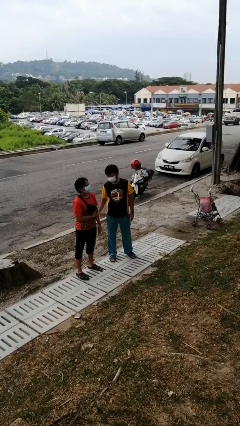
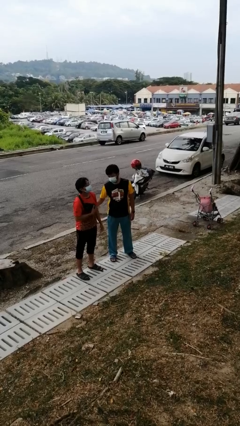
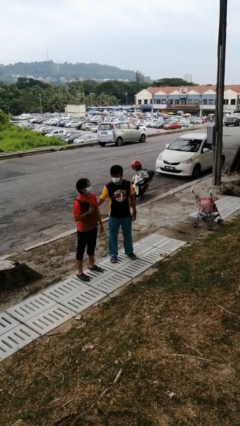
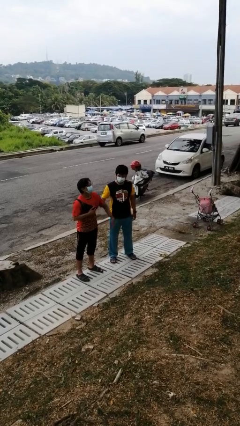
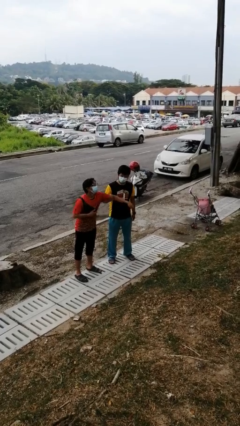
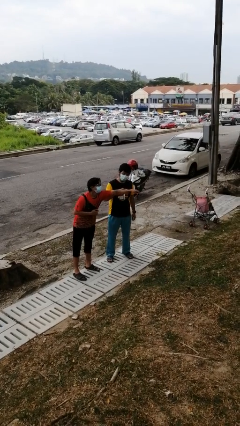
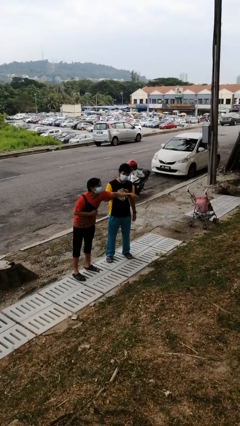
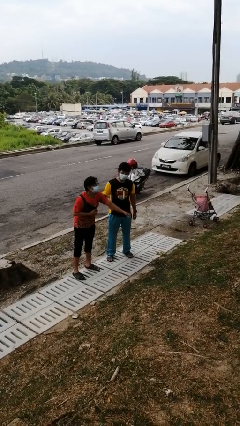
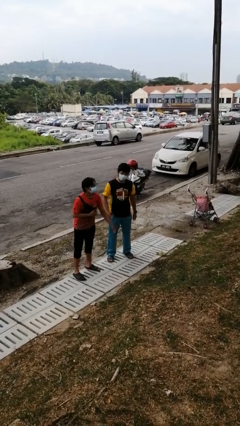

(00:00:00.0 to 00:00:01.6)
person grabs person by bicep

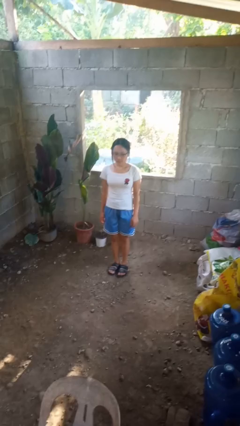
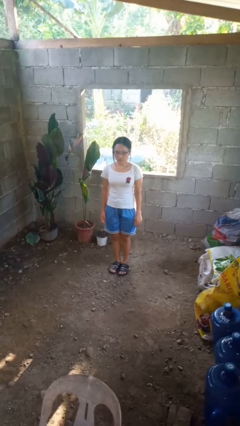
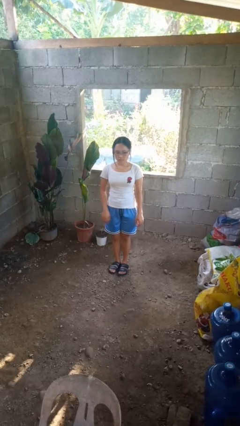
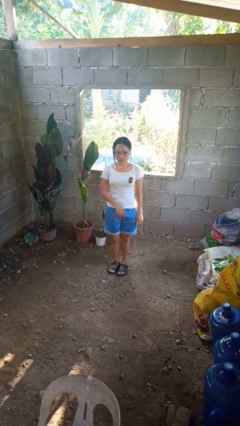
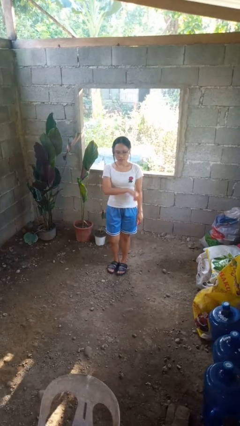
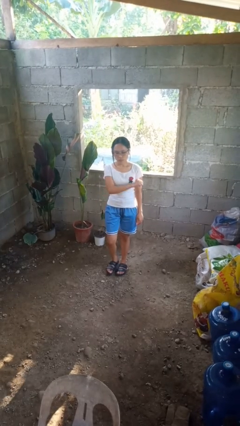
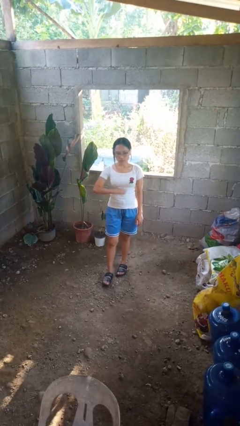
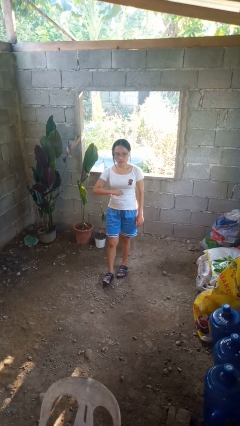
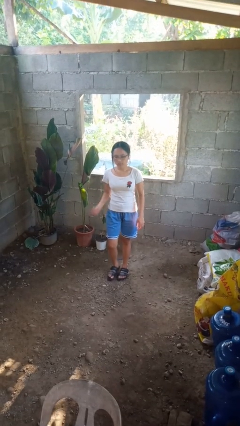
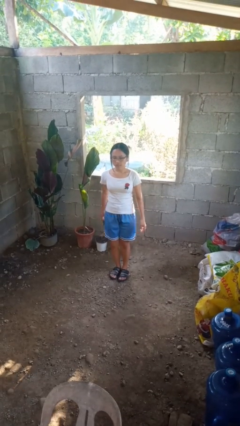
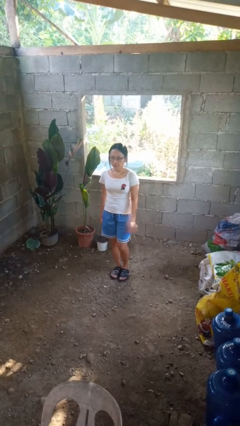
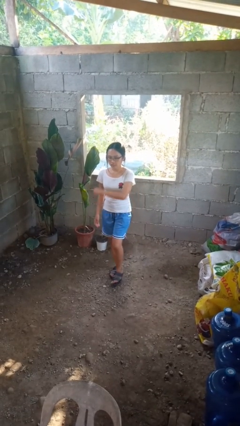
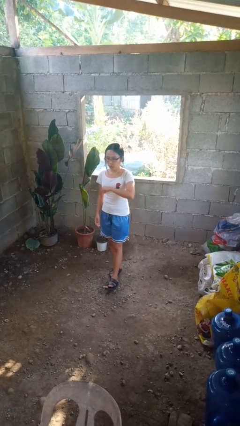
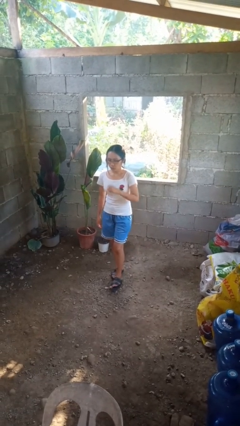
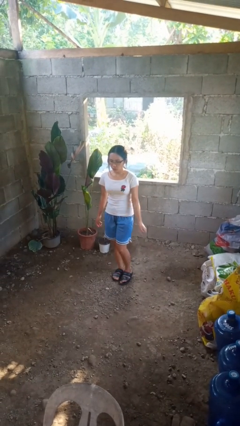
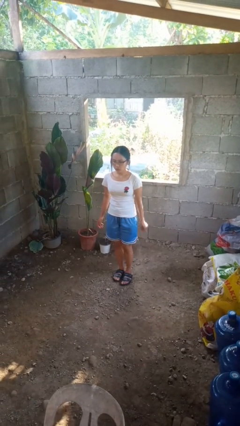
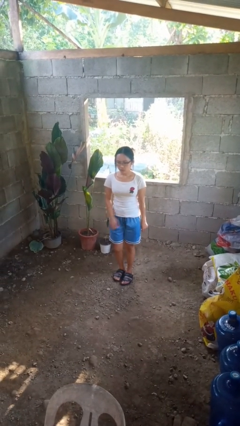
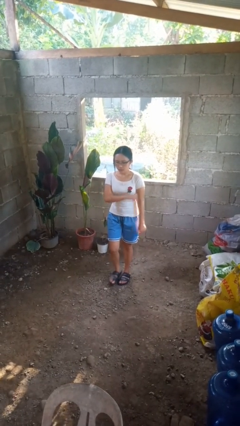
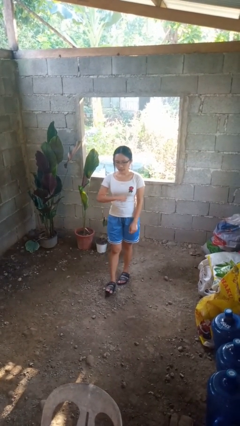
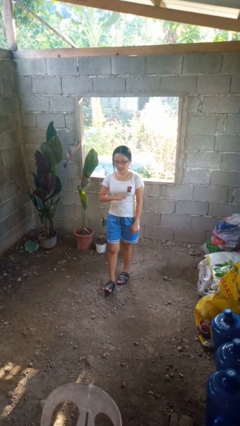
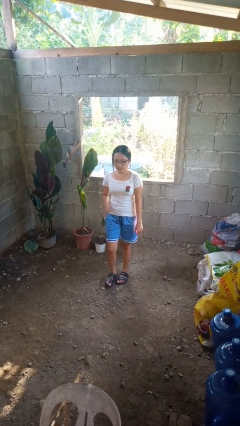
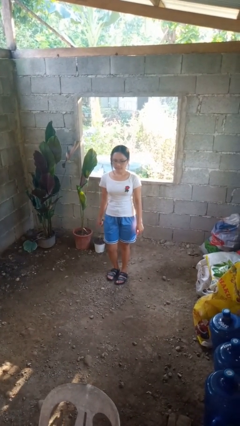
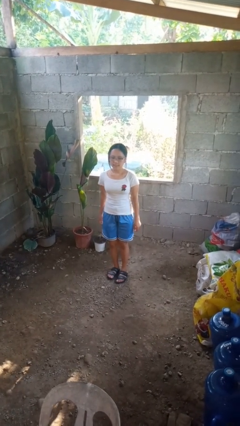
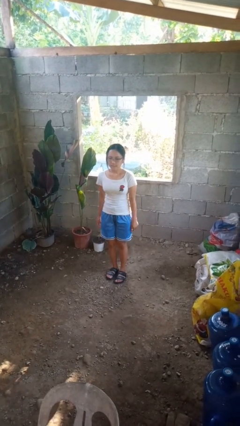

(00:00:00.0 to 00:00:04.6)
person dances in place

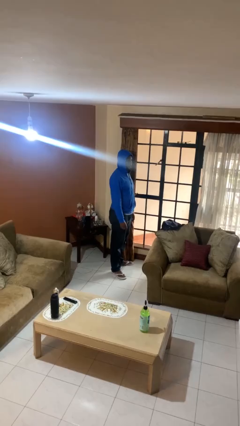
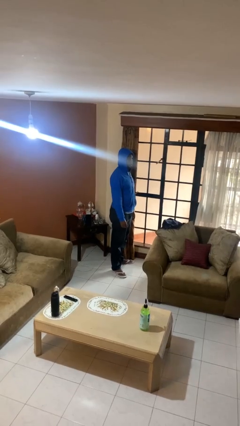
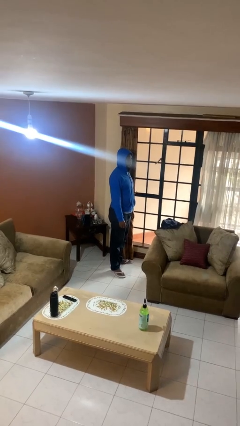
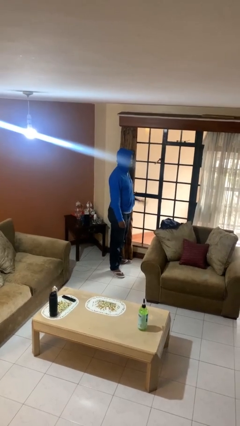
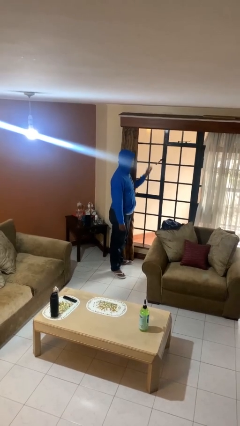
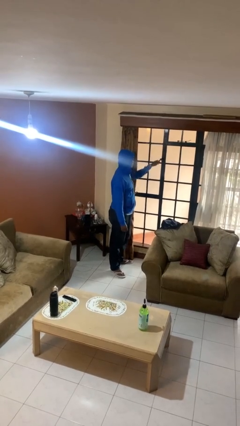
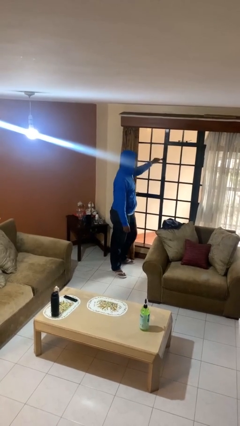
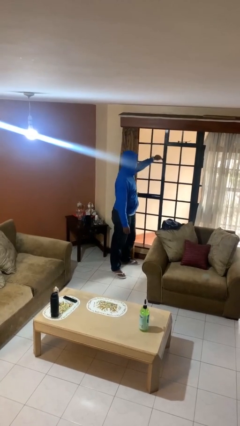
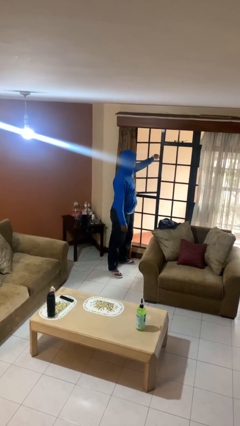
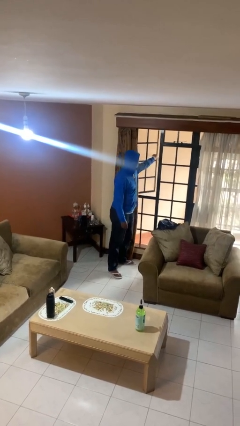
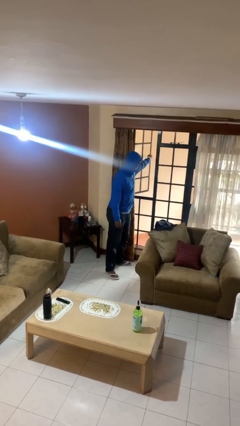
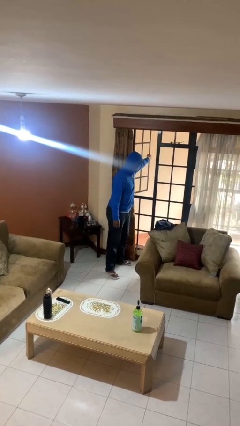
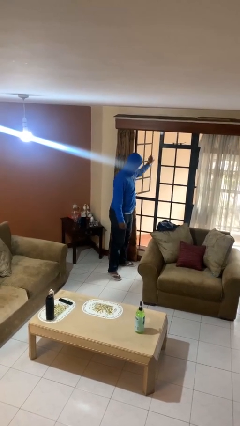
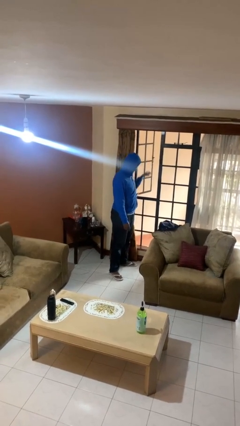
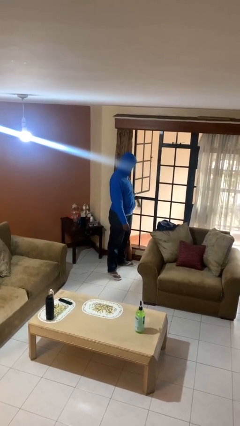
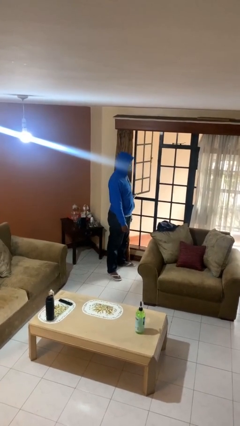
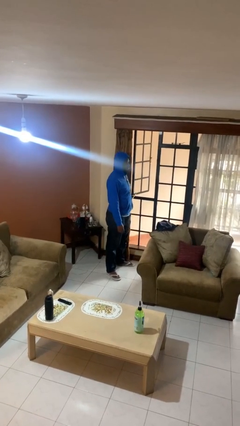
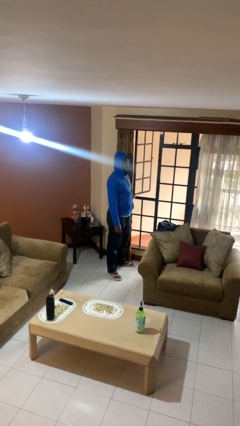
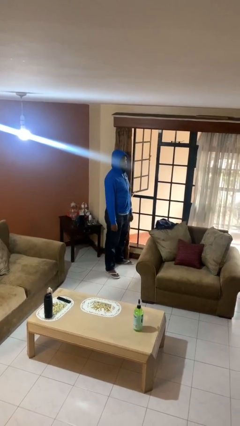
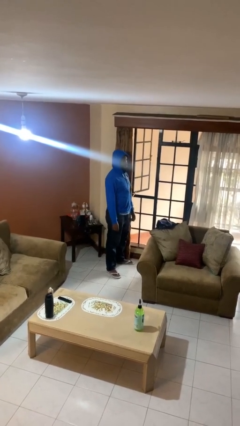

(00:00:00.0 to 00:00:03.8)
person opens home window

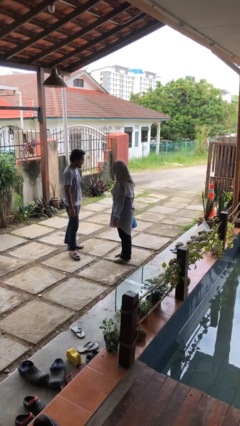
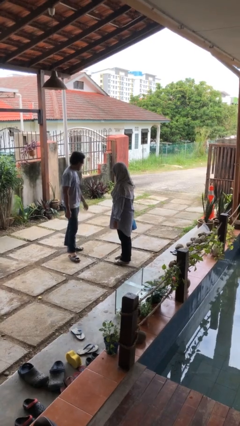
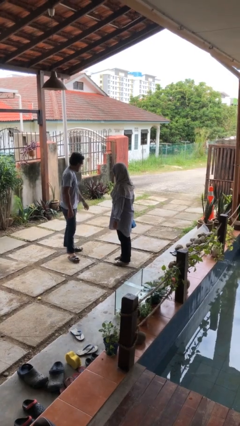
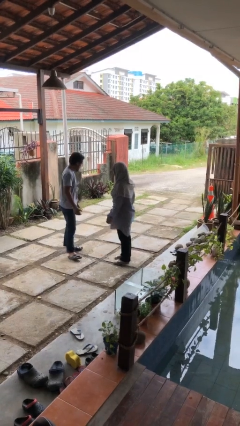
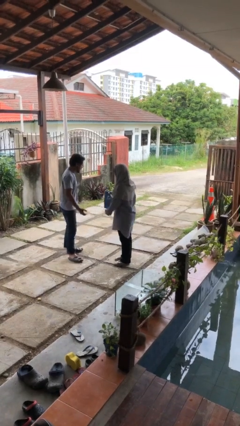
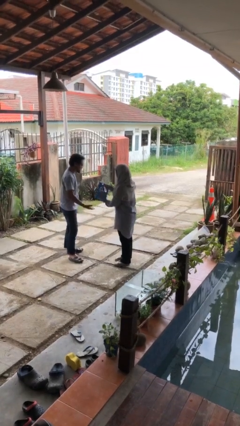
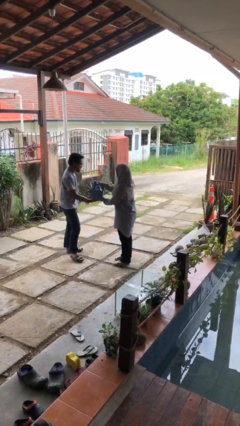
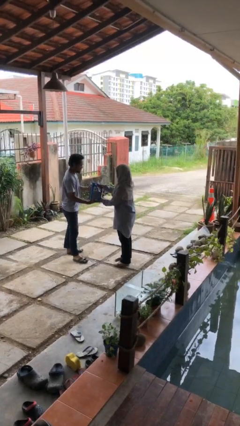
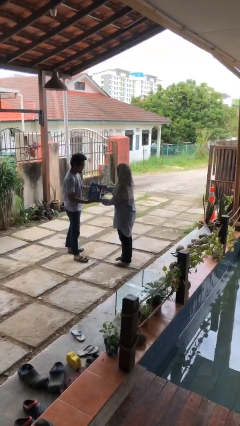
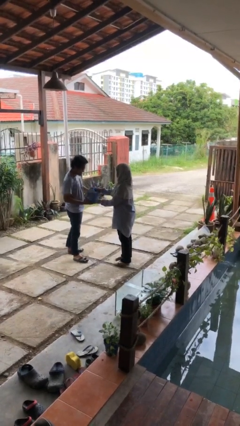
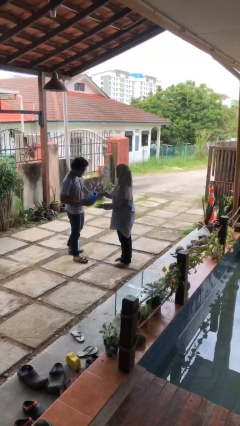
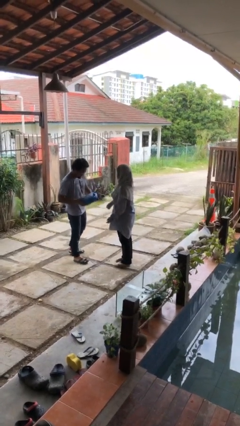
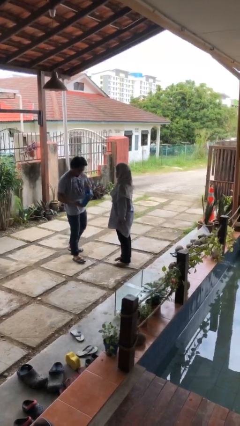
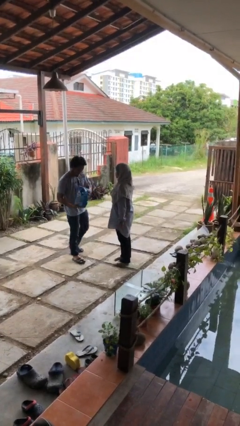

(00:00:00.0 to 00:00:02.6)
person transfers object to person

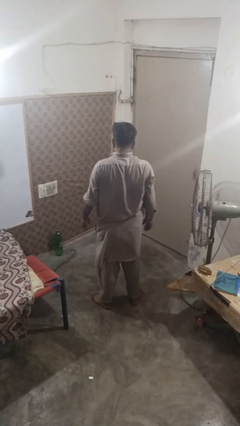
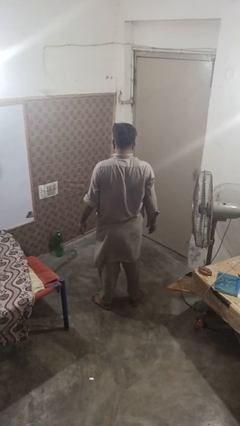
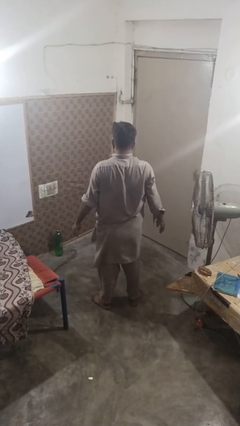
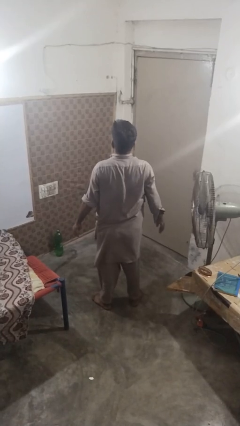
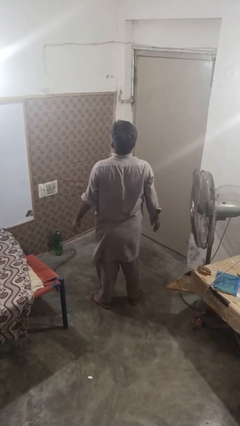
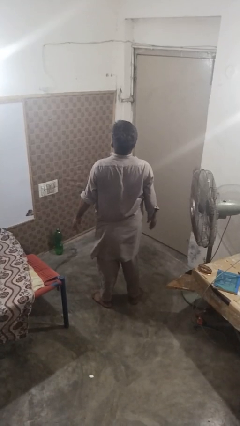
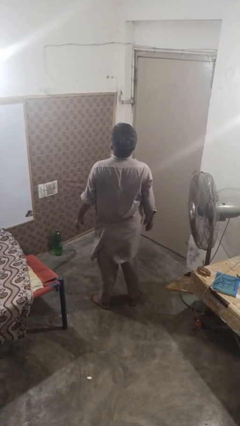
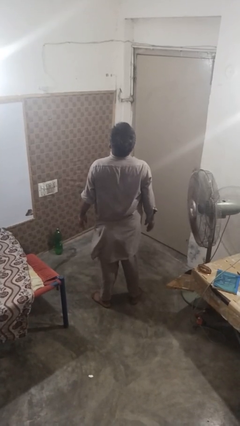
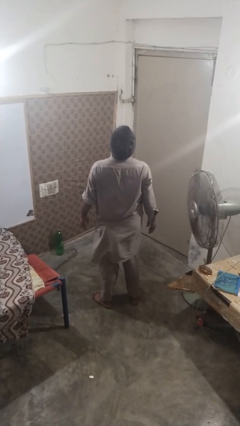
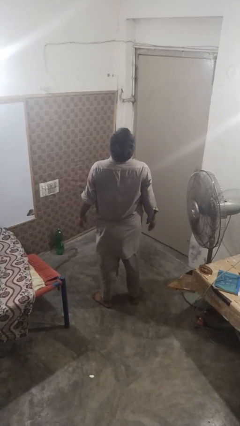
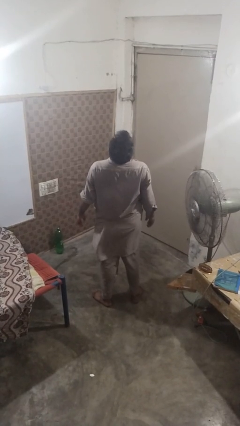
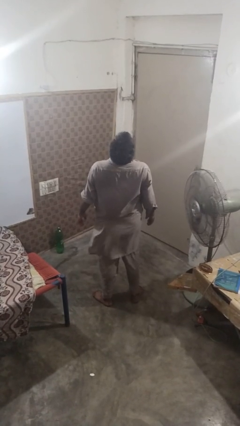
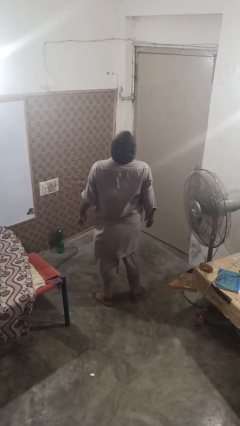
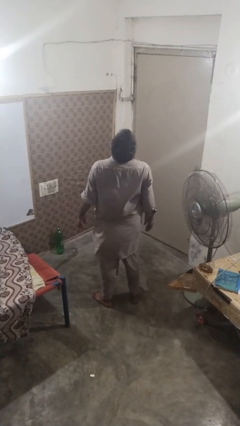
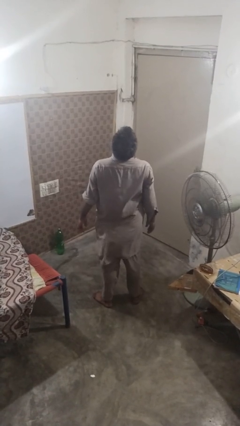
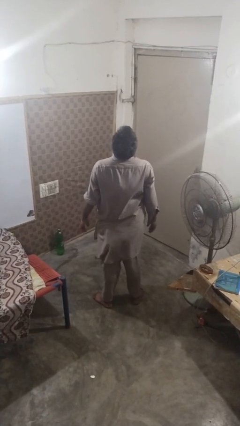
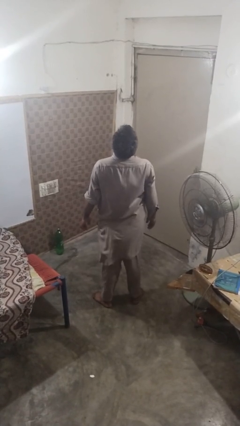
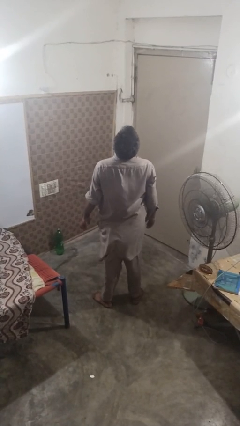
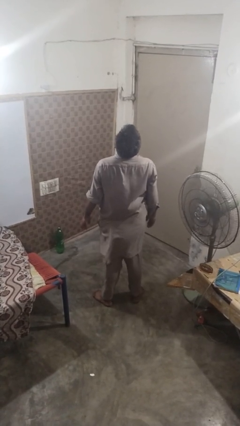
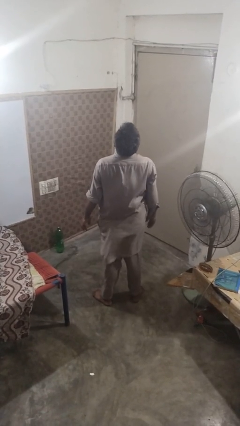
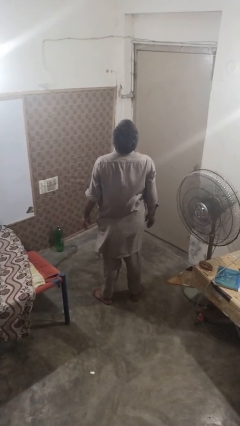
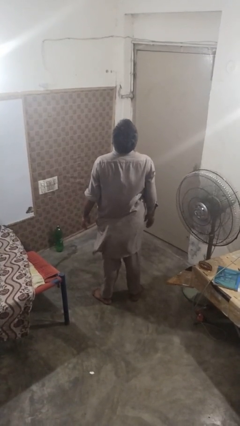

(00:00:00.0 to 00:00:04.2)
person stretches back

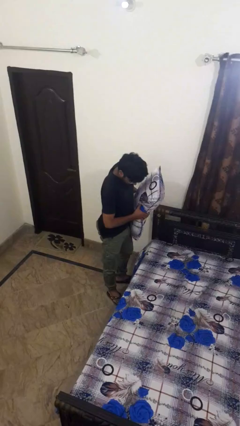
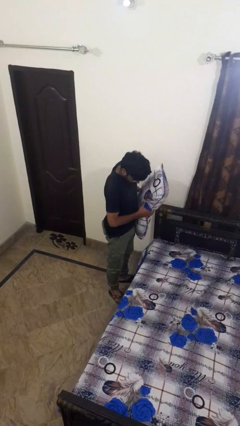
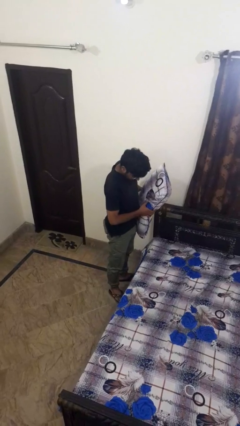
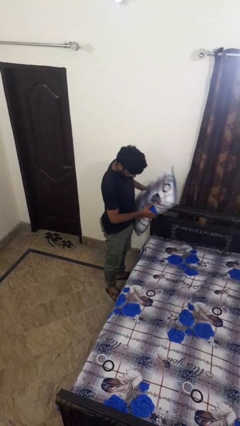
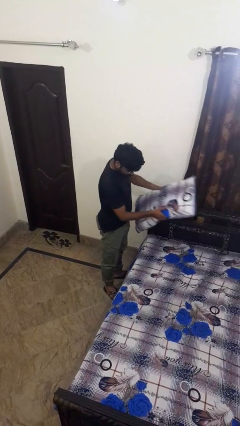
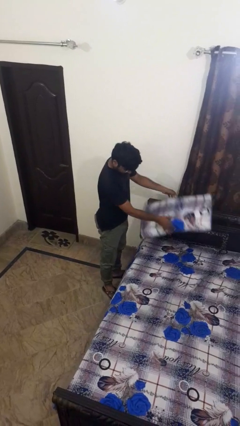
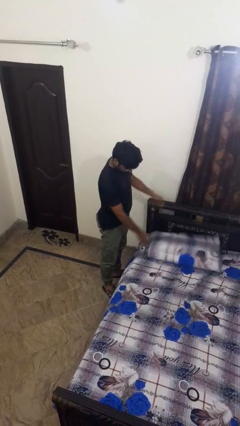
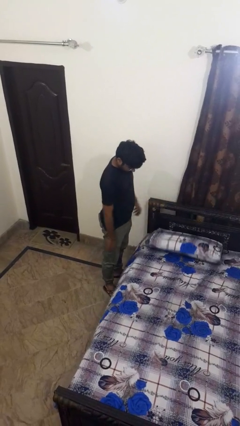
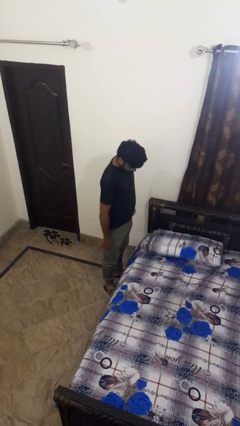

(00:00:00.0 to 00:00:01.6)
person puts down object on bed
